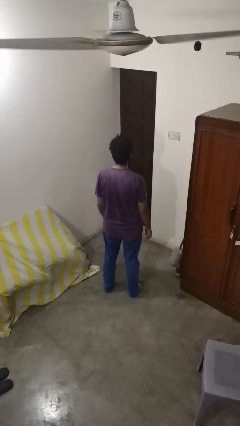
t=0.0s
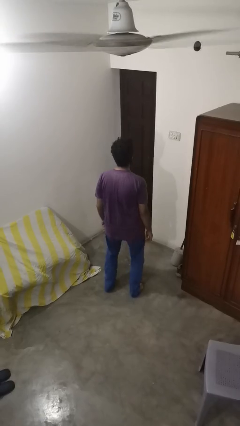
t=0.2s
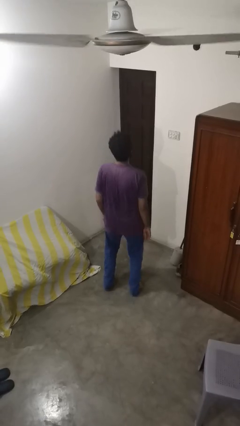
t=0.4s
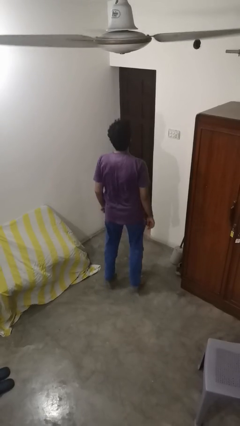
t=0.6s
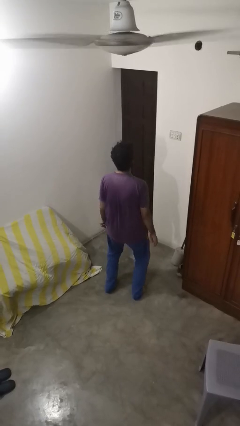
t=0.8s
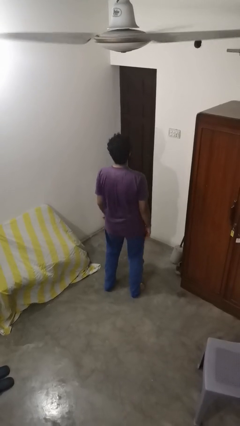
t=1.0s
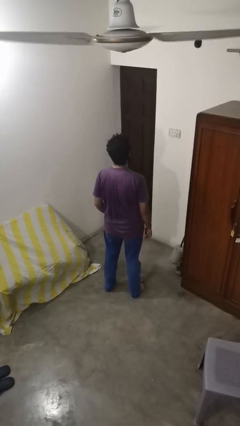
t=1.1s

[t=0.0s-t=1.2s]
person jumps

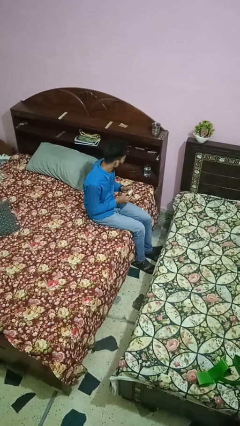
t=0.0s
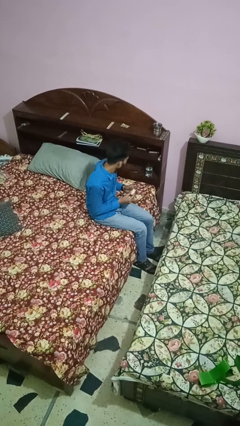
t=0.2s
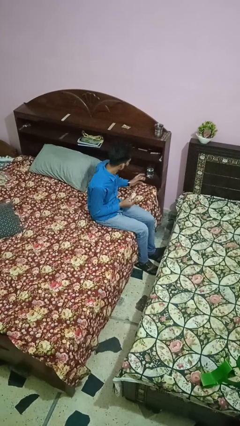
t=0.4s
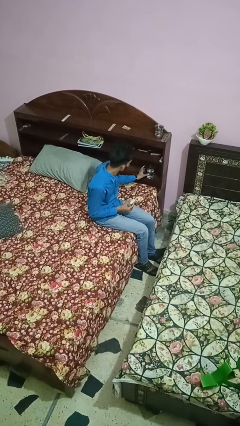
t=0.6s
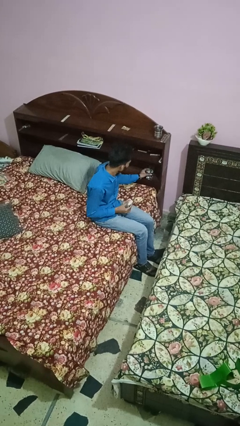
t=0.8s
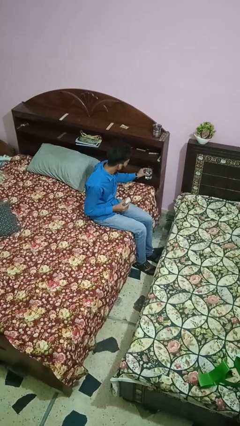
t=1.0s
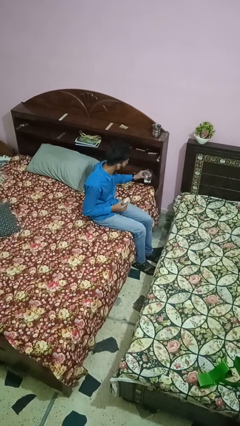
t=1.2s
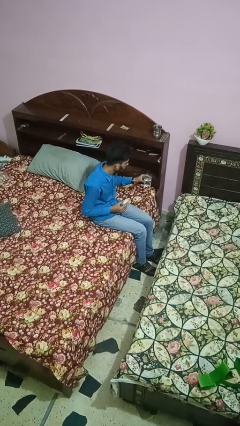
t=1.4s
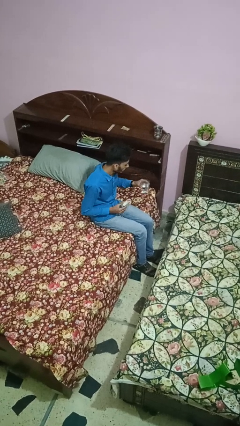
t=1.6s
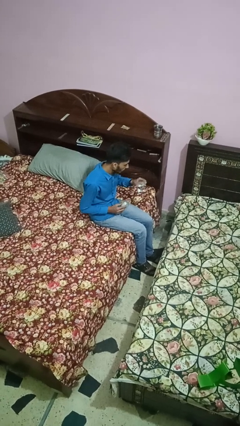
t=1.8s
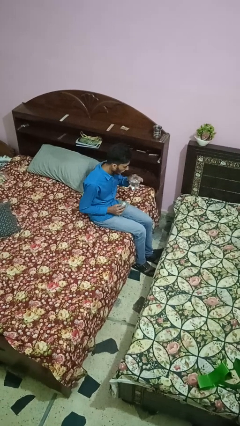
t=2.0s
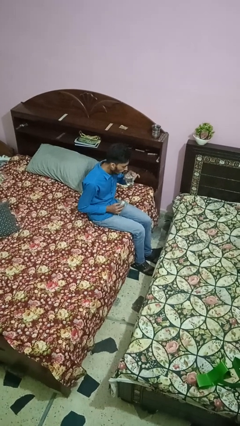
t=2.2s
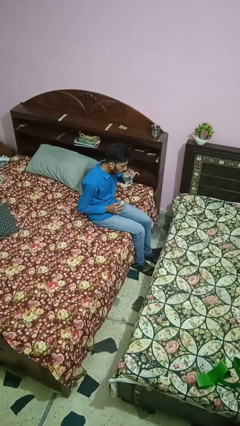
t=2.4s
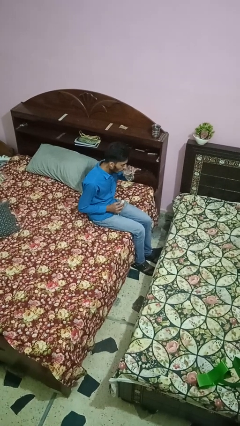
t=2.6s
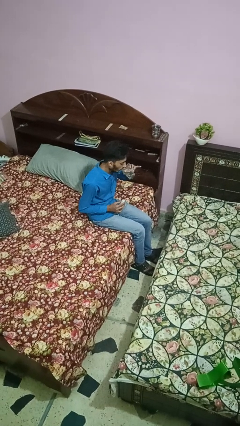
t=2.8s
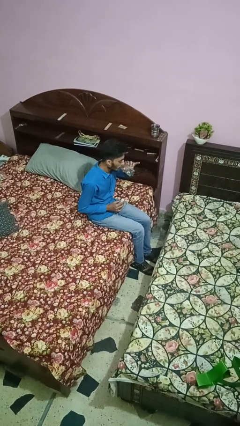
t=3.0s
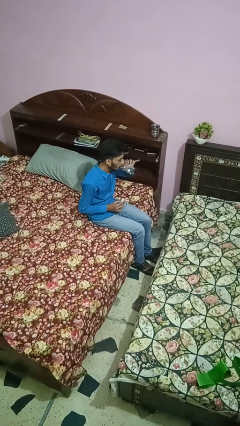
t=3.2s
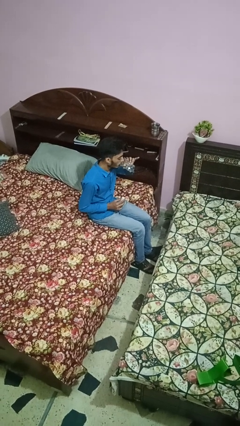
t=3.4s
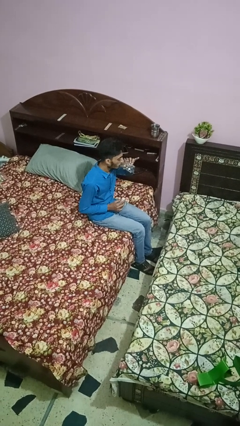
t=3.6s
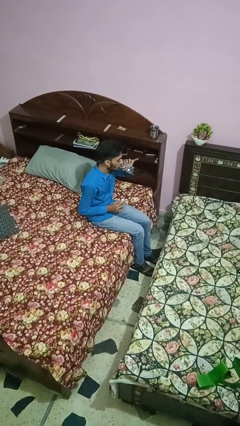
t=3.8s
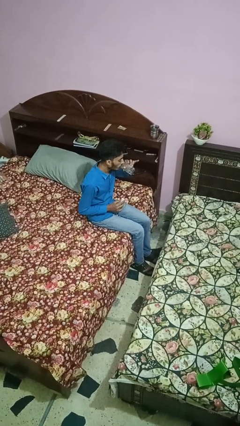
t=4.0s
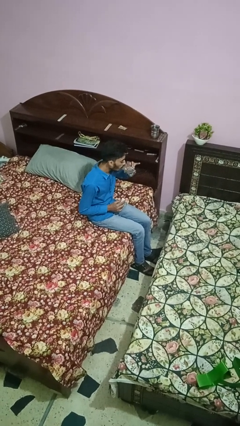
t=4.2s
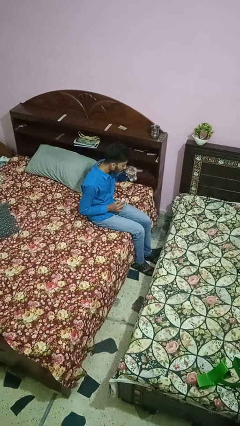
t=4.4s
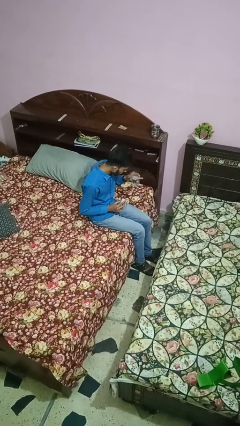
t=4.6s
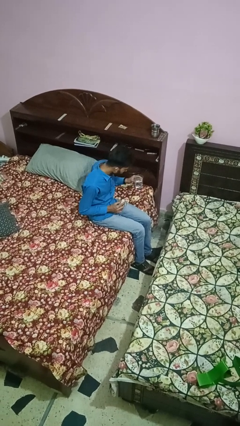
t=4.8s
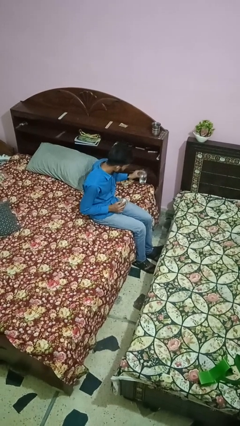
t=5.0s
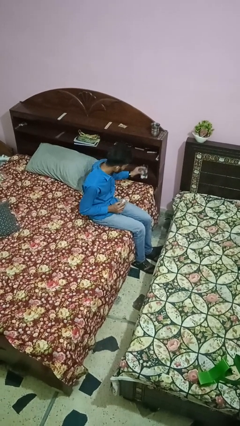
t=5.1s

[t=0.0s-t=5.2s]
person drinks from cup

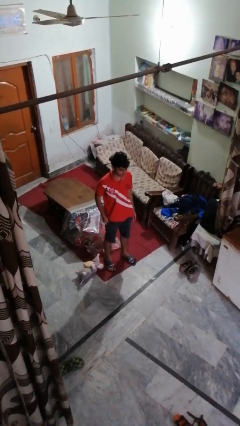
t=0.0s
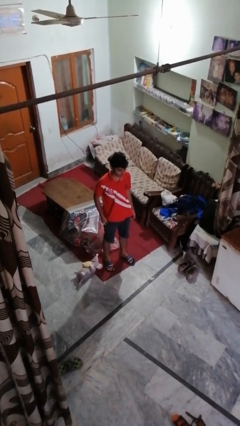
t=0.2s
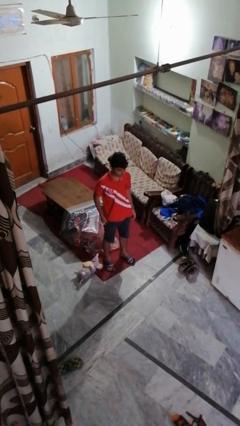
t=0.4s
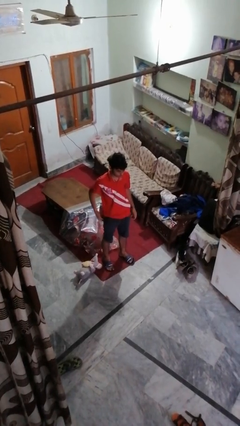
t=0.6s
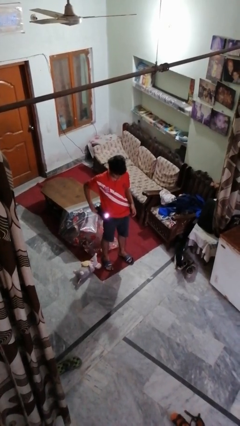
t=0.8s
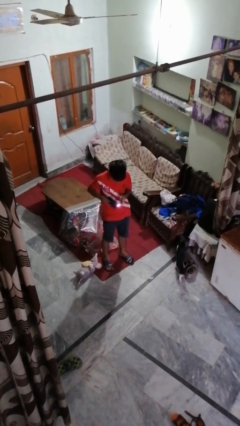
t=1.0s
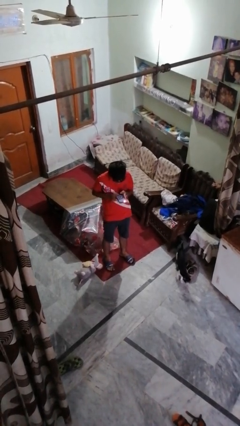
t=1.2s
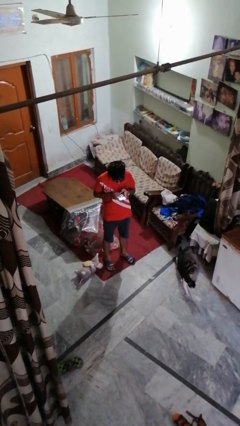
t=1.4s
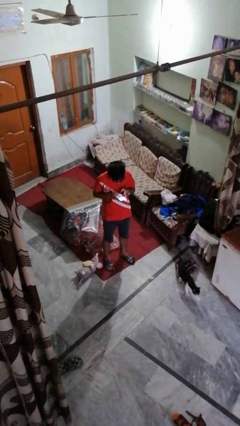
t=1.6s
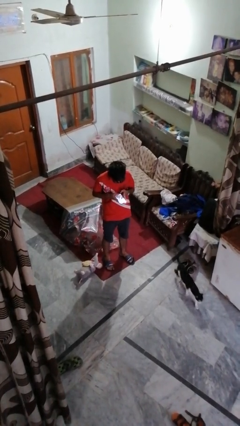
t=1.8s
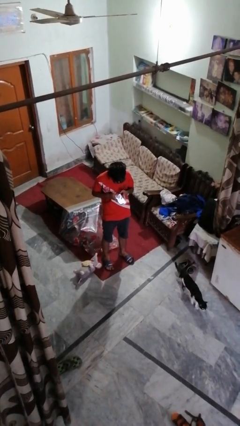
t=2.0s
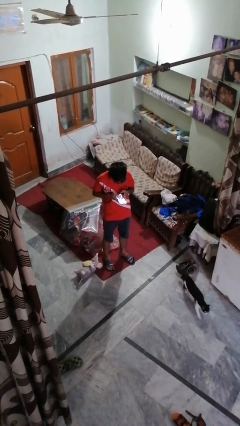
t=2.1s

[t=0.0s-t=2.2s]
person takes phone from pocket

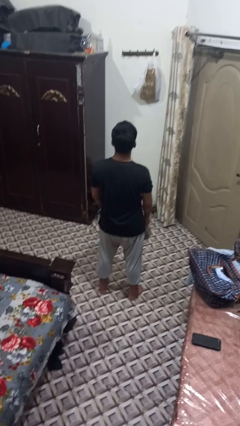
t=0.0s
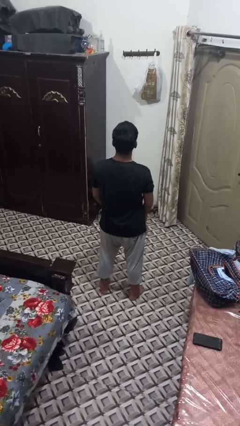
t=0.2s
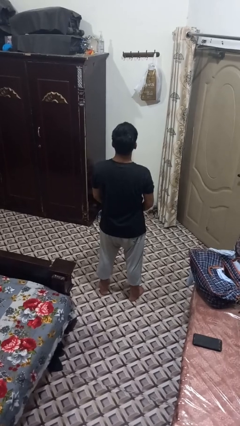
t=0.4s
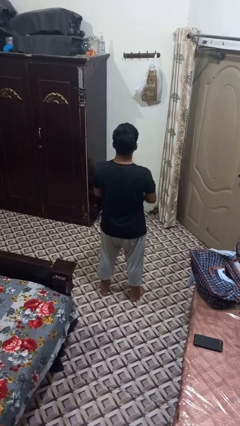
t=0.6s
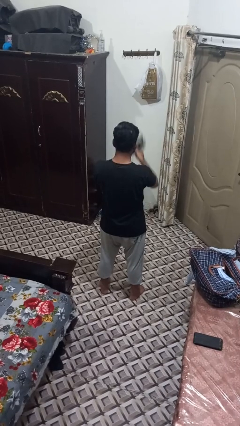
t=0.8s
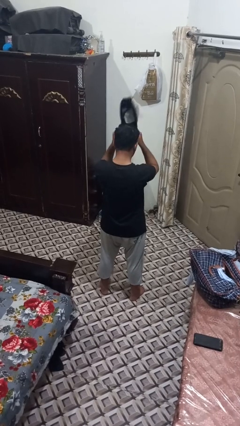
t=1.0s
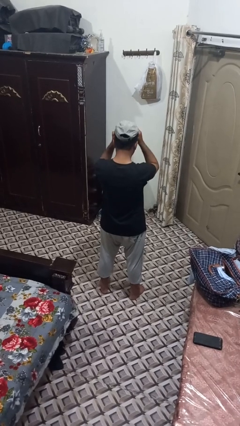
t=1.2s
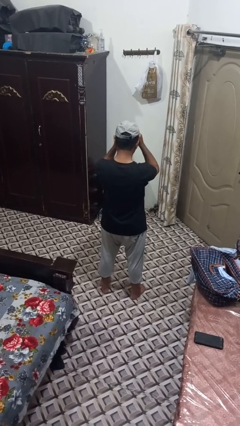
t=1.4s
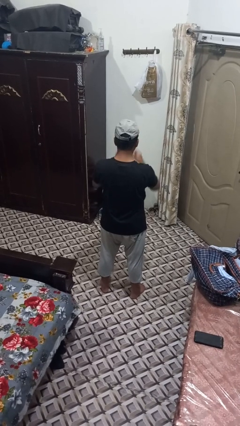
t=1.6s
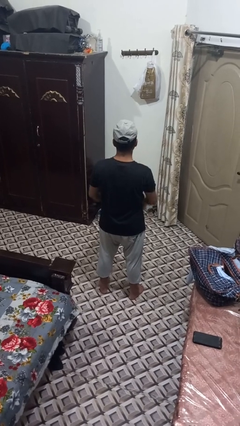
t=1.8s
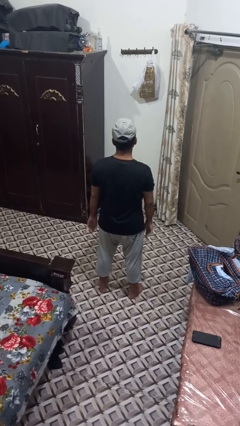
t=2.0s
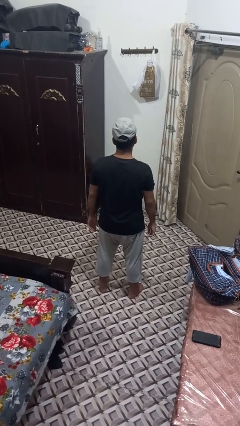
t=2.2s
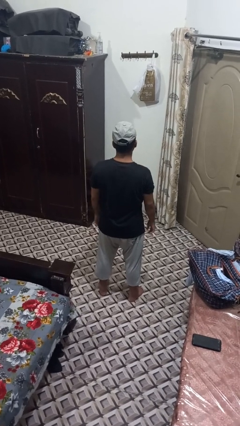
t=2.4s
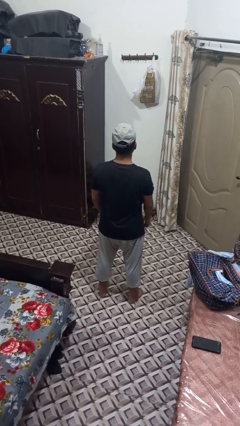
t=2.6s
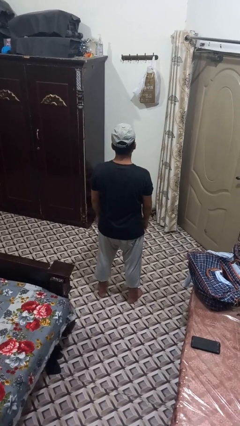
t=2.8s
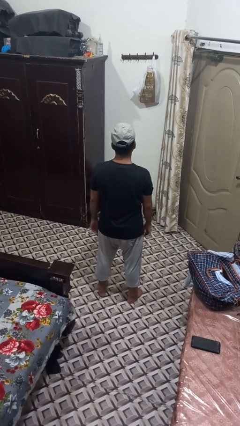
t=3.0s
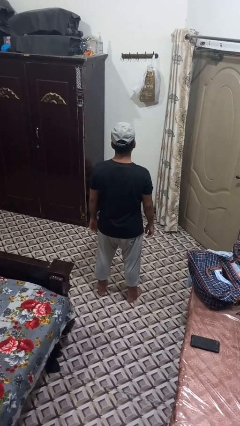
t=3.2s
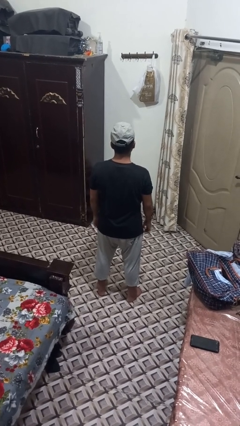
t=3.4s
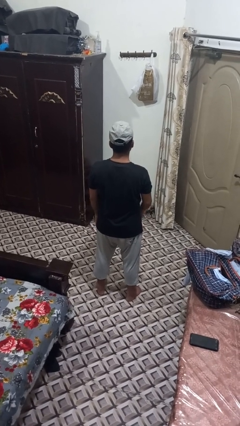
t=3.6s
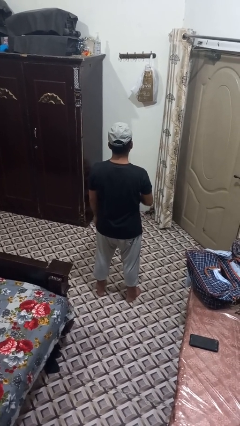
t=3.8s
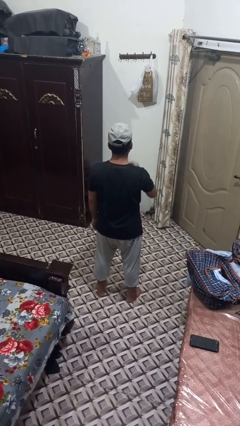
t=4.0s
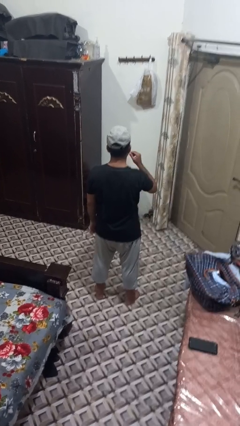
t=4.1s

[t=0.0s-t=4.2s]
person puts on hat

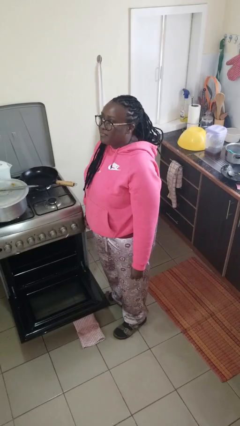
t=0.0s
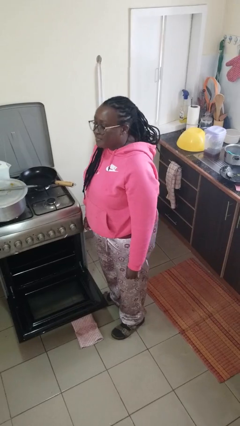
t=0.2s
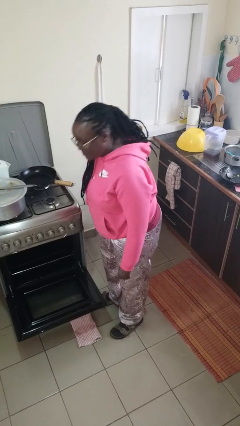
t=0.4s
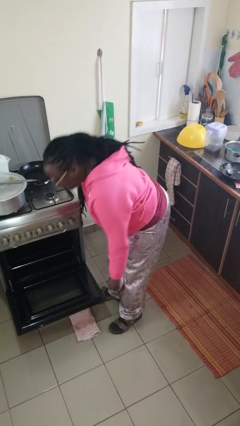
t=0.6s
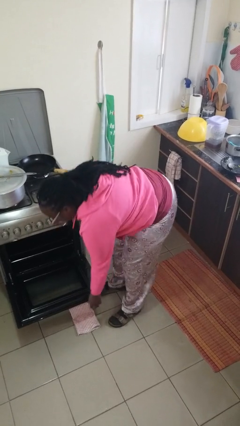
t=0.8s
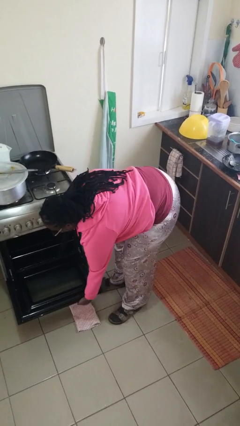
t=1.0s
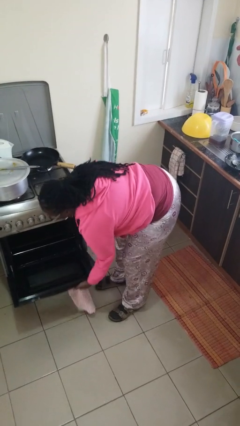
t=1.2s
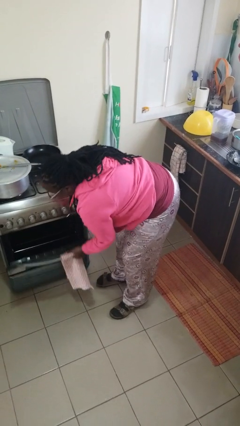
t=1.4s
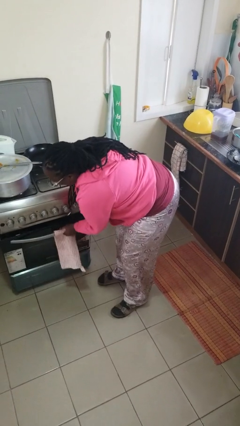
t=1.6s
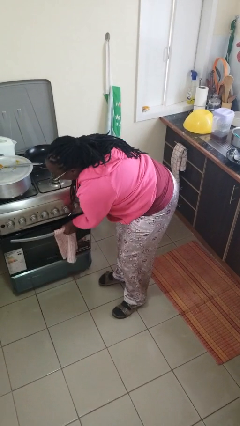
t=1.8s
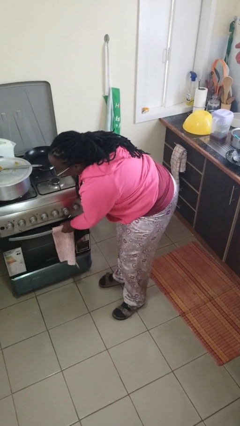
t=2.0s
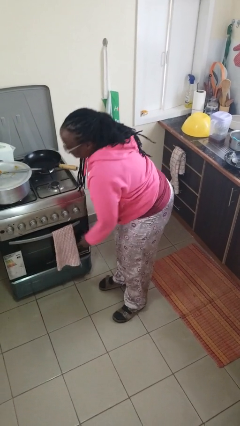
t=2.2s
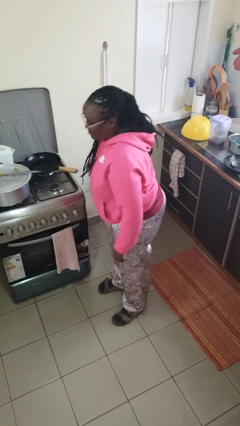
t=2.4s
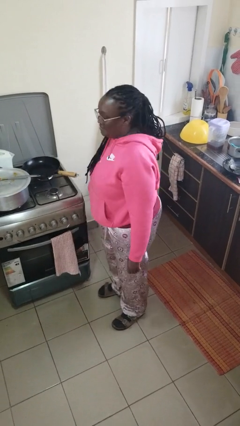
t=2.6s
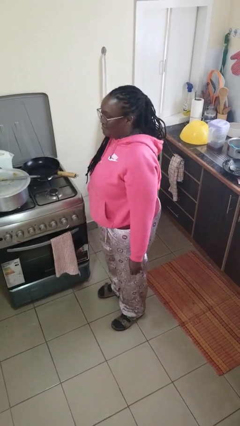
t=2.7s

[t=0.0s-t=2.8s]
person closes oven door

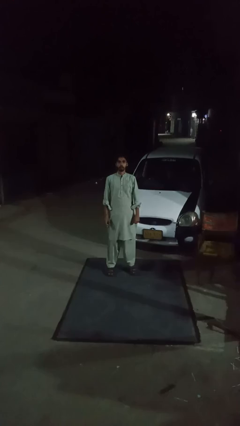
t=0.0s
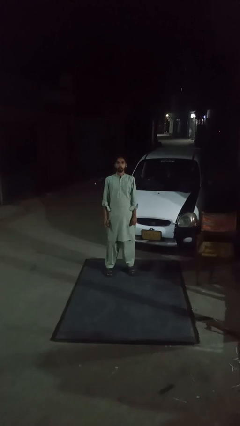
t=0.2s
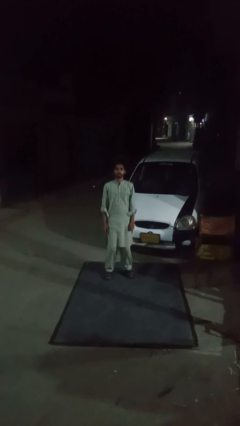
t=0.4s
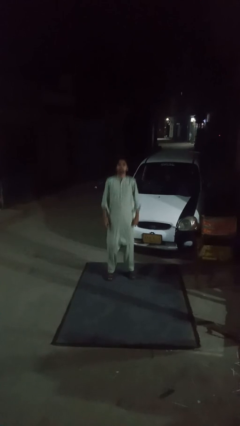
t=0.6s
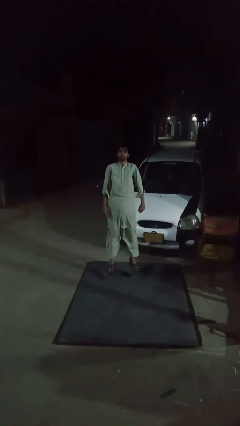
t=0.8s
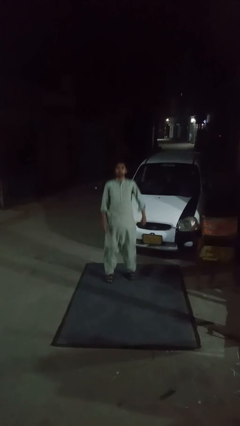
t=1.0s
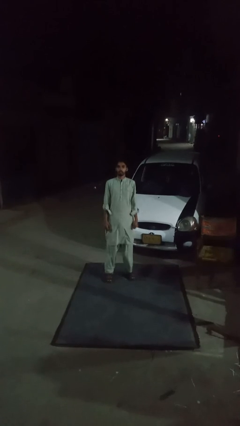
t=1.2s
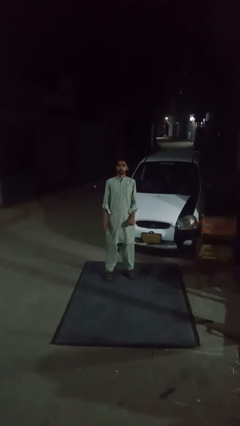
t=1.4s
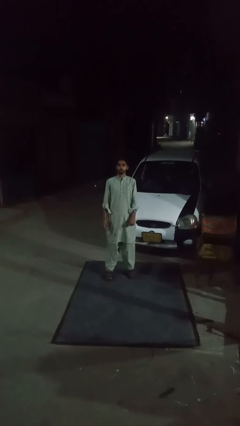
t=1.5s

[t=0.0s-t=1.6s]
person exercises with jumping jacks

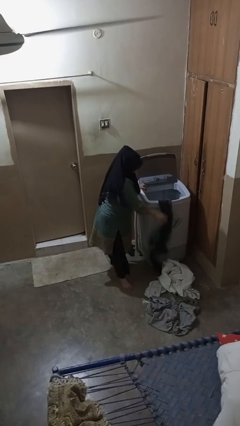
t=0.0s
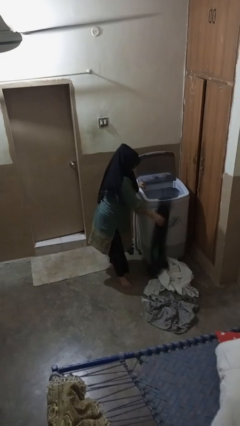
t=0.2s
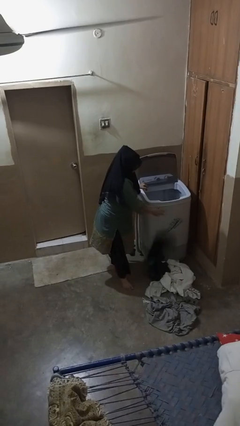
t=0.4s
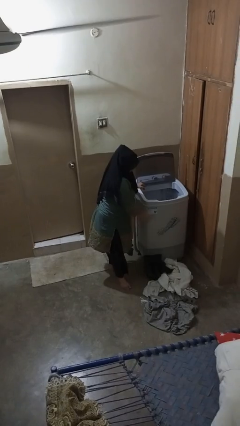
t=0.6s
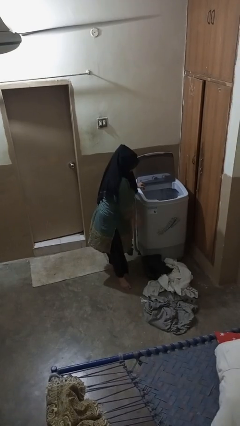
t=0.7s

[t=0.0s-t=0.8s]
person loads clotheswasher
